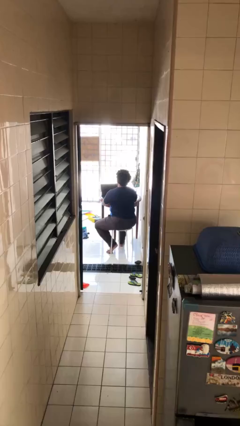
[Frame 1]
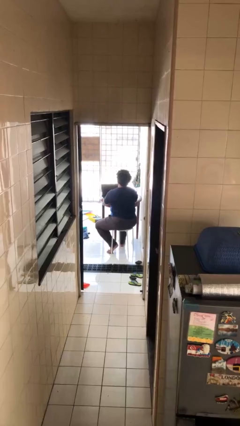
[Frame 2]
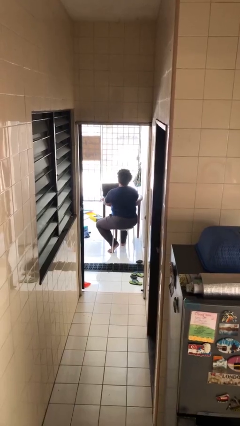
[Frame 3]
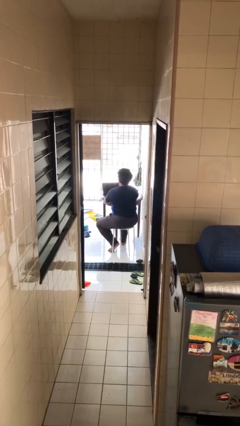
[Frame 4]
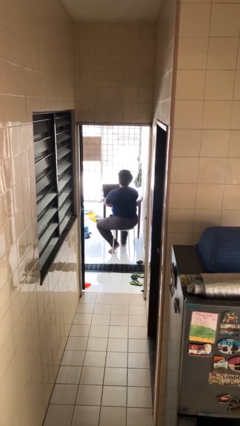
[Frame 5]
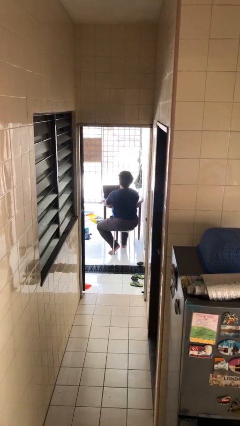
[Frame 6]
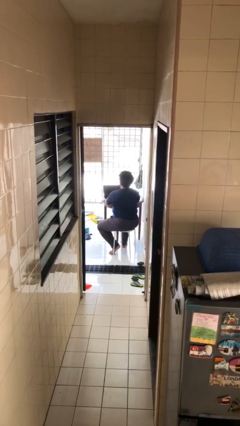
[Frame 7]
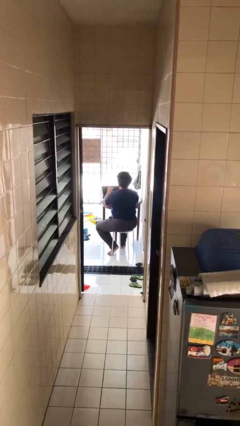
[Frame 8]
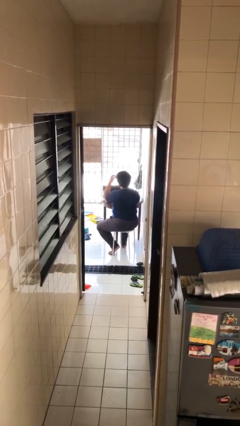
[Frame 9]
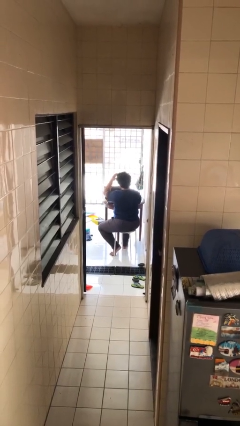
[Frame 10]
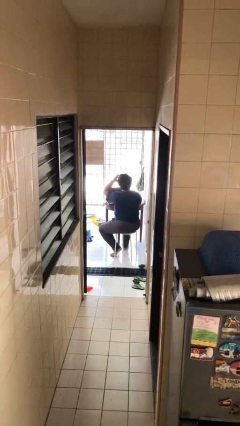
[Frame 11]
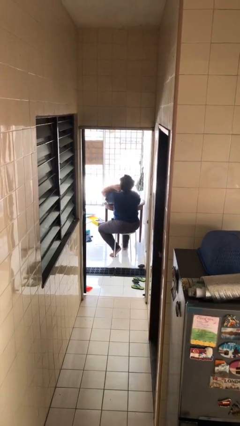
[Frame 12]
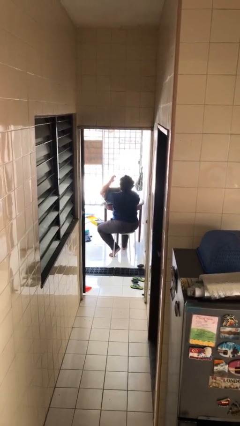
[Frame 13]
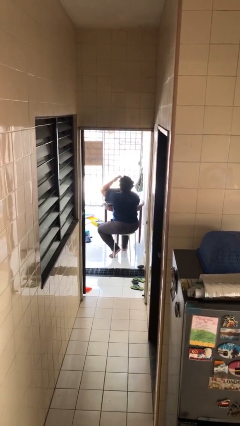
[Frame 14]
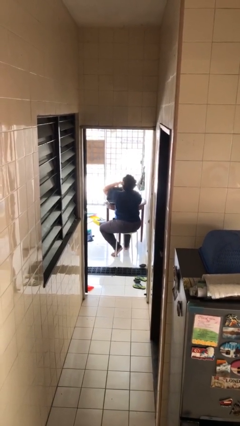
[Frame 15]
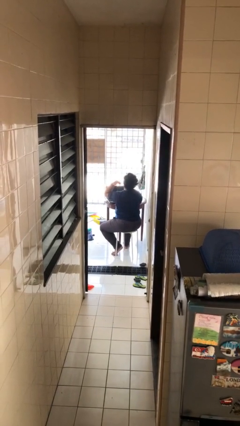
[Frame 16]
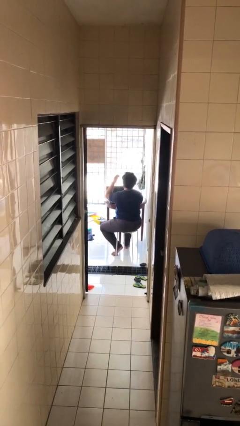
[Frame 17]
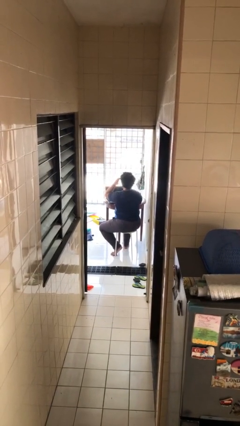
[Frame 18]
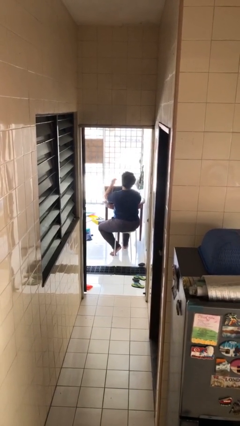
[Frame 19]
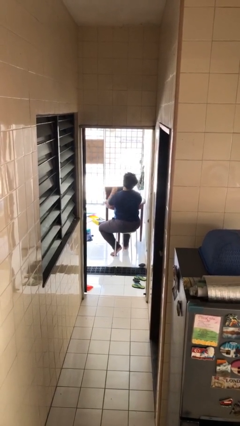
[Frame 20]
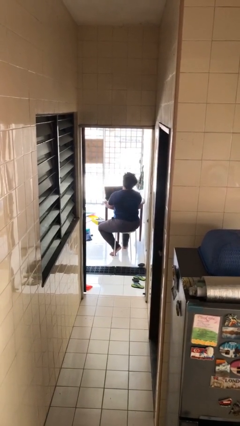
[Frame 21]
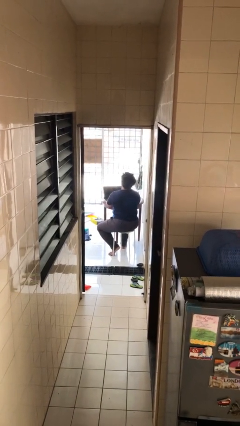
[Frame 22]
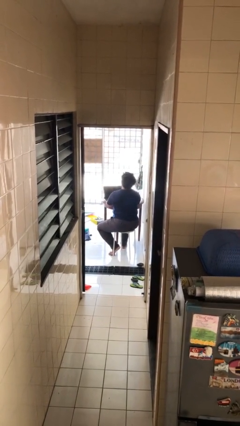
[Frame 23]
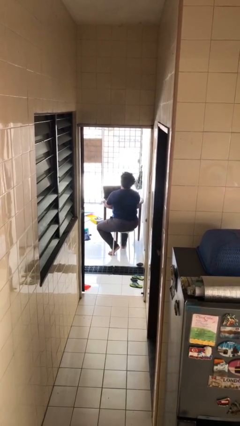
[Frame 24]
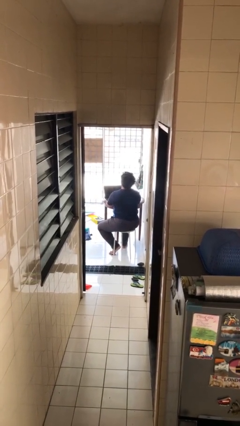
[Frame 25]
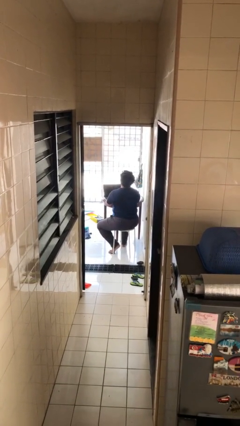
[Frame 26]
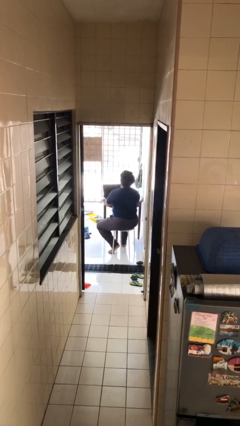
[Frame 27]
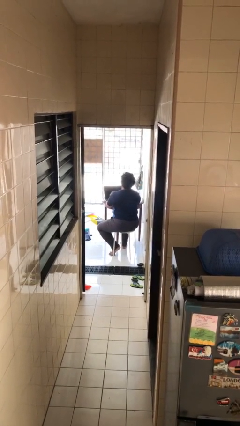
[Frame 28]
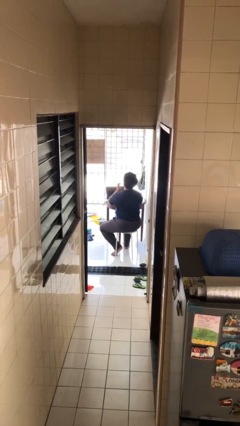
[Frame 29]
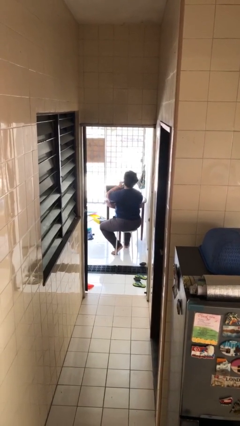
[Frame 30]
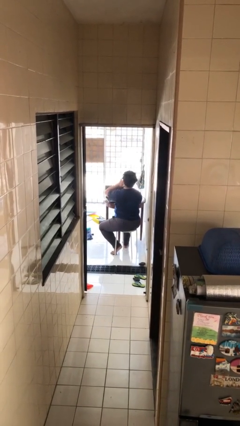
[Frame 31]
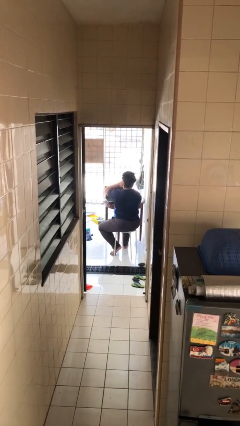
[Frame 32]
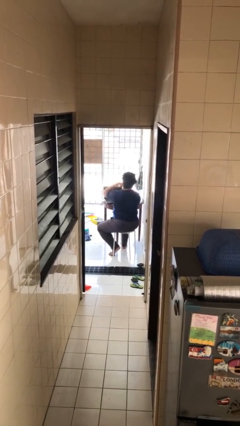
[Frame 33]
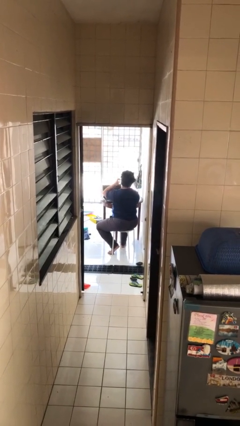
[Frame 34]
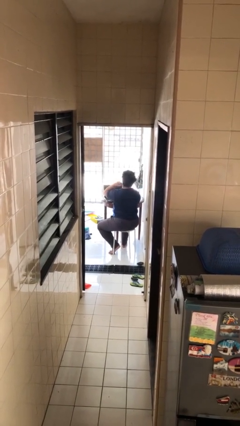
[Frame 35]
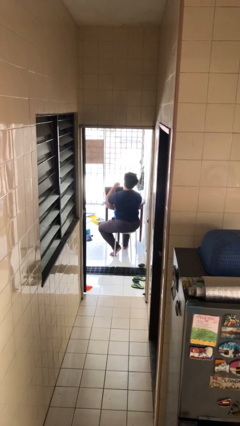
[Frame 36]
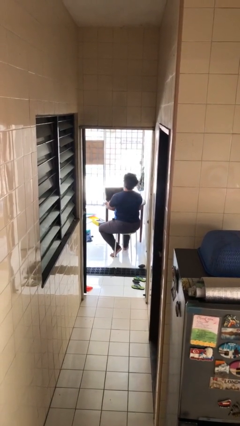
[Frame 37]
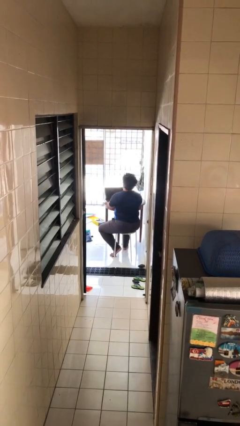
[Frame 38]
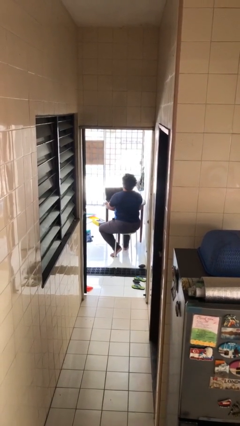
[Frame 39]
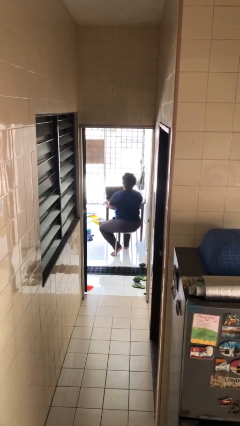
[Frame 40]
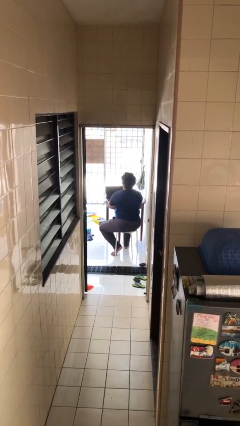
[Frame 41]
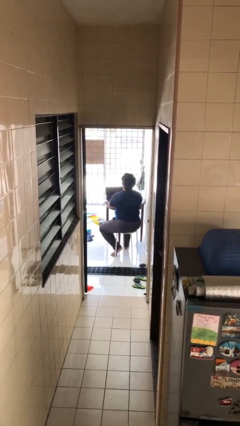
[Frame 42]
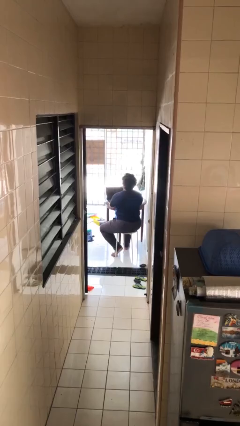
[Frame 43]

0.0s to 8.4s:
person interacts with laptop

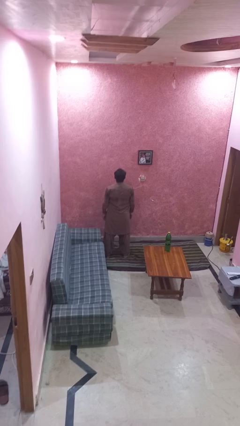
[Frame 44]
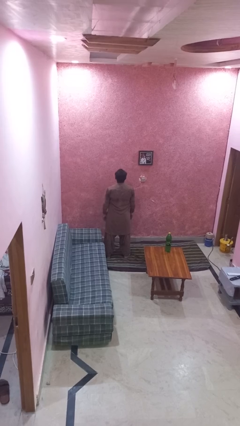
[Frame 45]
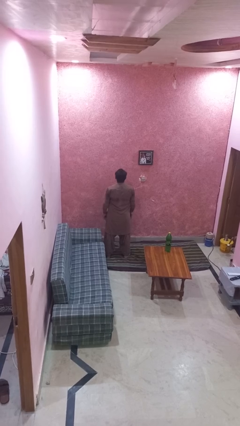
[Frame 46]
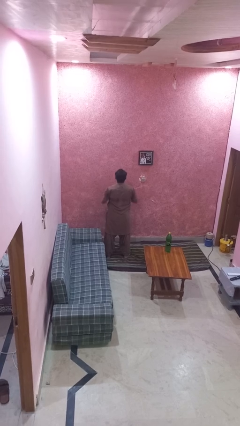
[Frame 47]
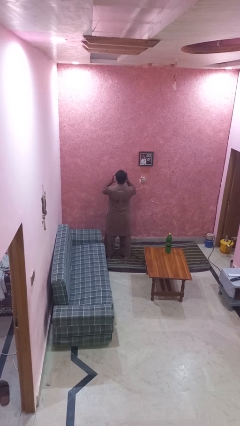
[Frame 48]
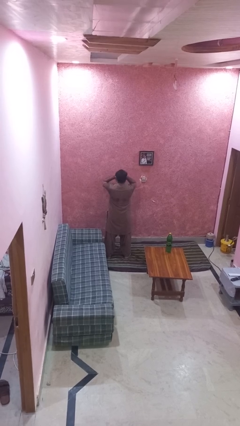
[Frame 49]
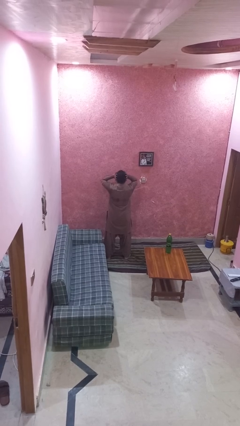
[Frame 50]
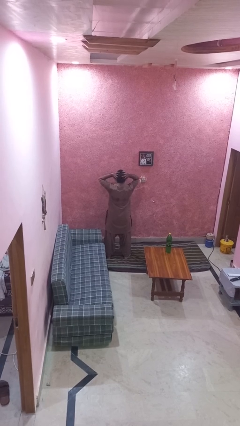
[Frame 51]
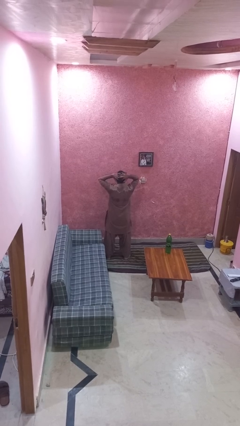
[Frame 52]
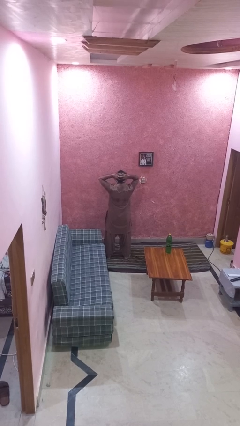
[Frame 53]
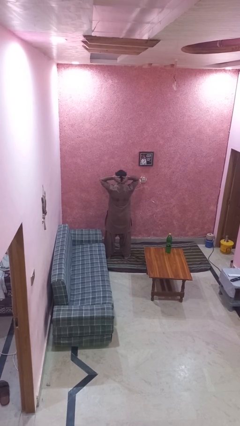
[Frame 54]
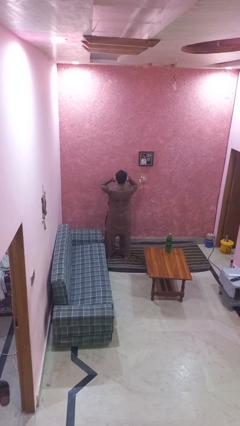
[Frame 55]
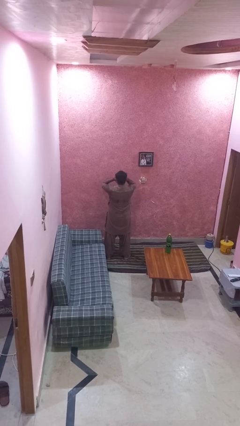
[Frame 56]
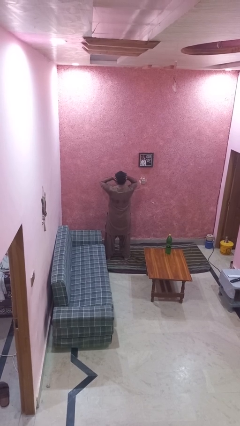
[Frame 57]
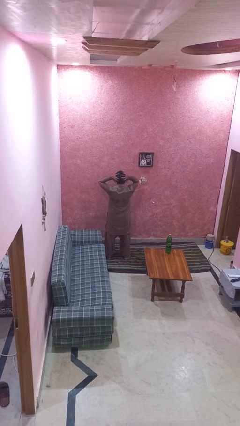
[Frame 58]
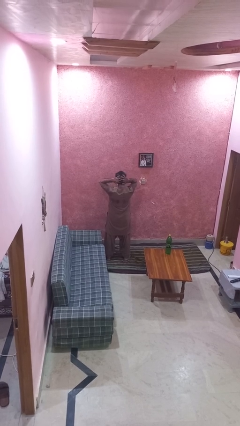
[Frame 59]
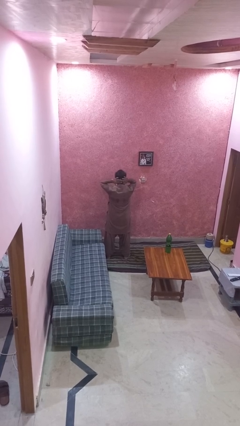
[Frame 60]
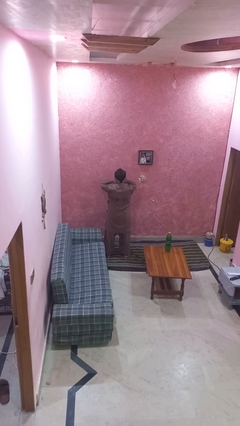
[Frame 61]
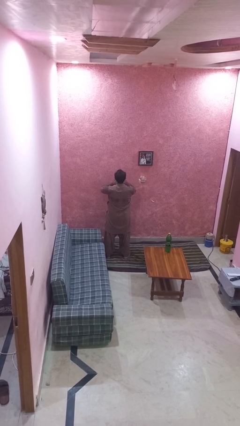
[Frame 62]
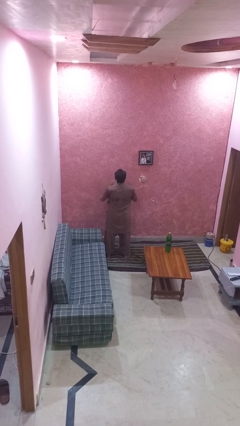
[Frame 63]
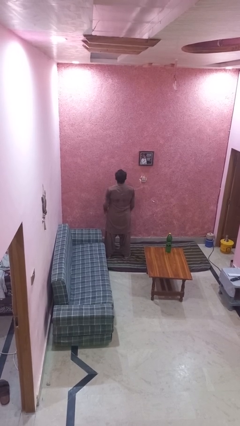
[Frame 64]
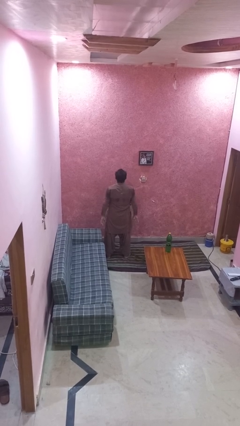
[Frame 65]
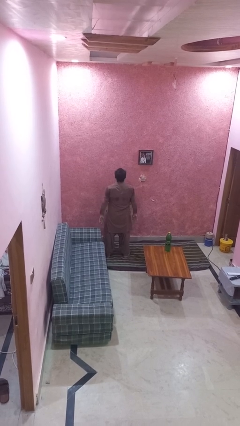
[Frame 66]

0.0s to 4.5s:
person strokes hair

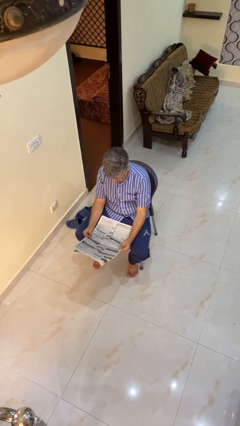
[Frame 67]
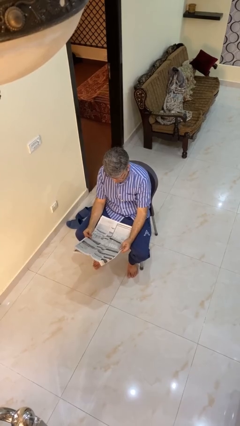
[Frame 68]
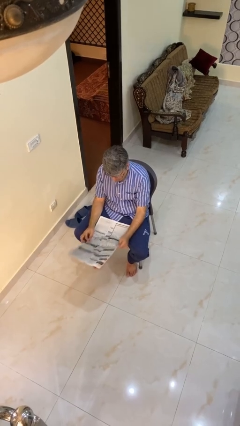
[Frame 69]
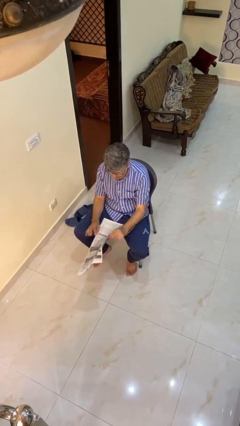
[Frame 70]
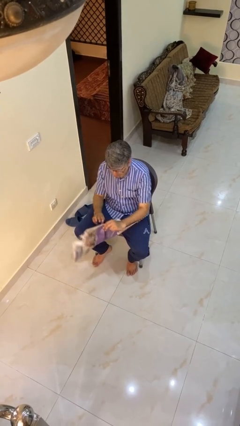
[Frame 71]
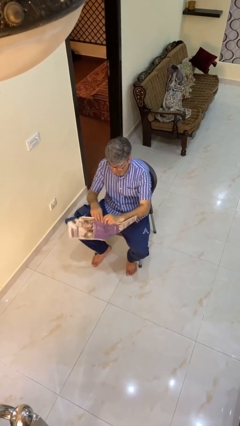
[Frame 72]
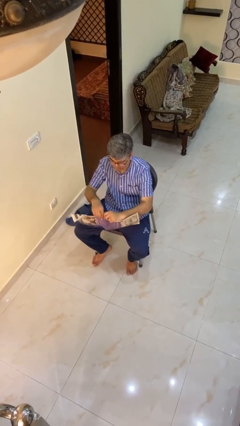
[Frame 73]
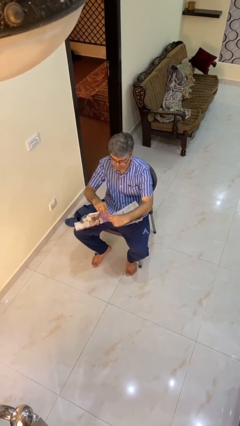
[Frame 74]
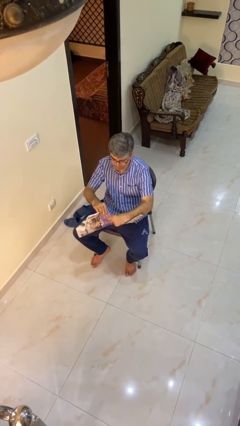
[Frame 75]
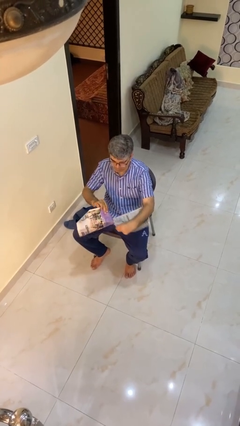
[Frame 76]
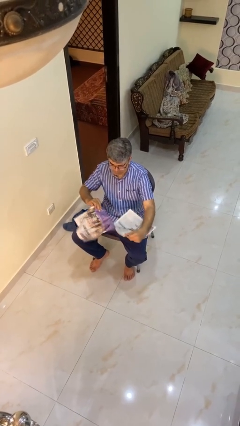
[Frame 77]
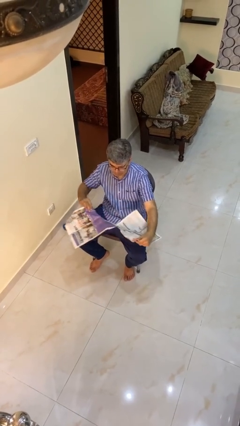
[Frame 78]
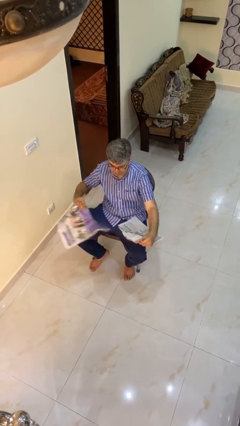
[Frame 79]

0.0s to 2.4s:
person tears paper

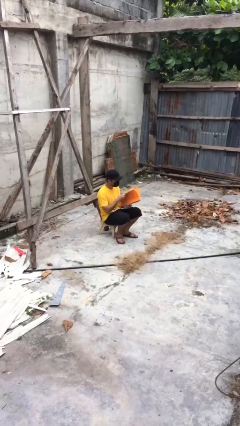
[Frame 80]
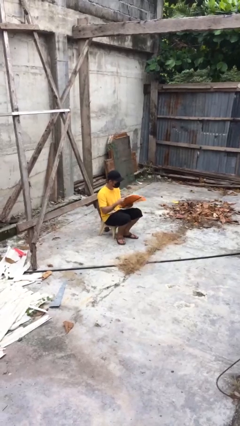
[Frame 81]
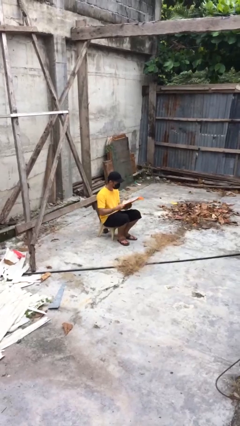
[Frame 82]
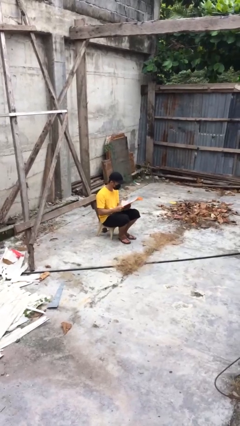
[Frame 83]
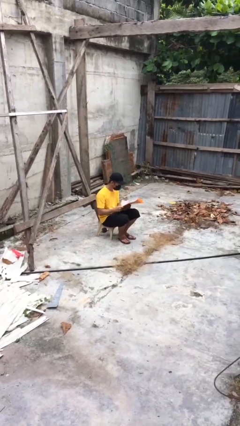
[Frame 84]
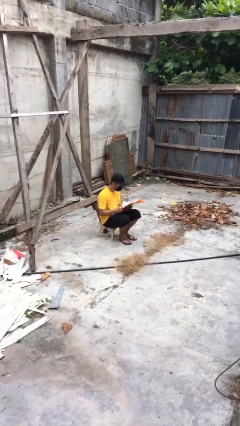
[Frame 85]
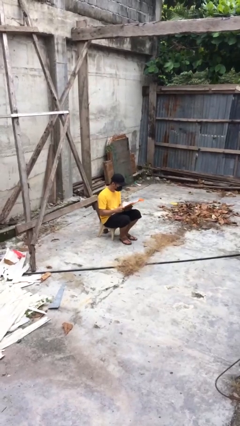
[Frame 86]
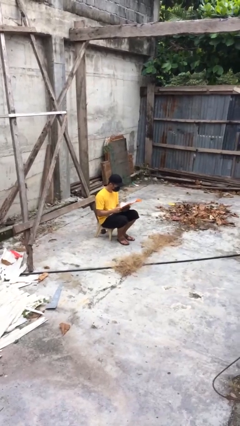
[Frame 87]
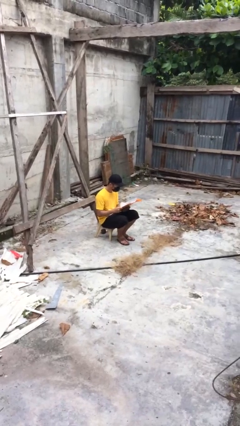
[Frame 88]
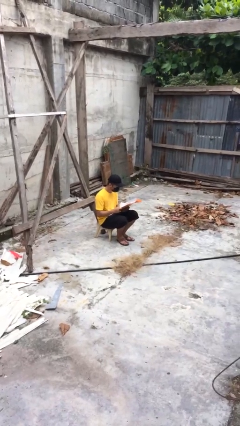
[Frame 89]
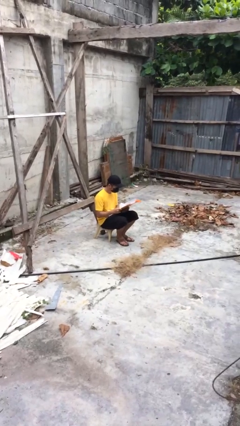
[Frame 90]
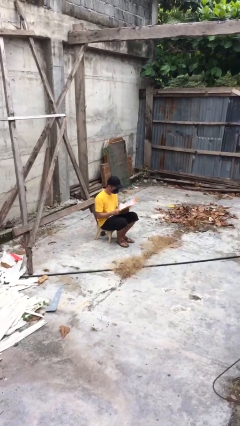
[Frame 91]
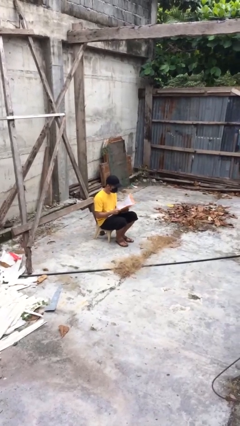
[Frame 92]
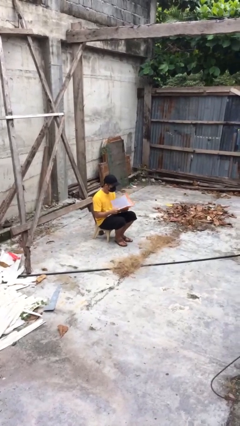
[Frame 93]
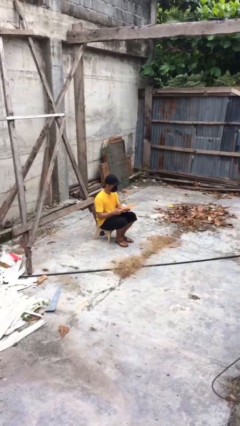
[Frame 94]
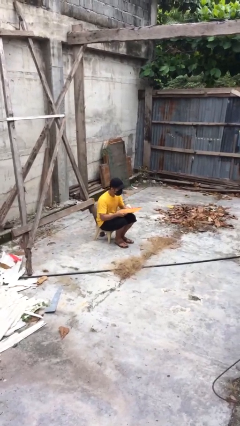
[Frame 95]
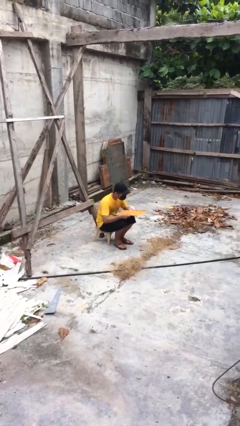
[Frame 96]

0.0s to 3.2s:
person reads document
